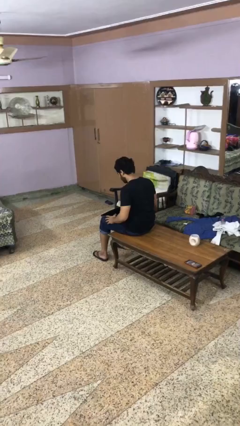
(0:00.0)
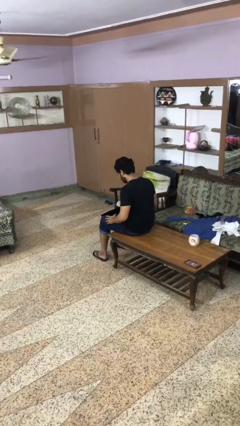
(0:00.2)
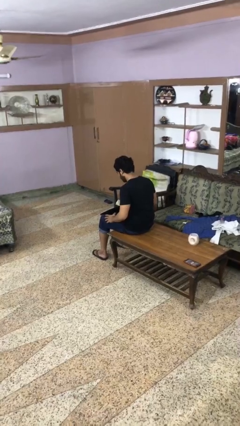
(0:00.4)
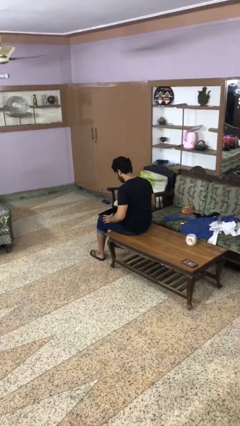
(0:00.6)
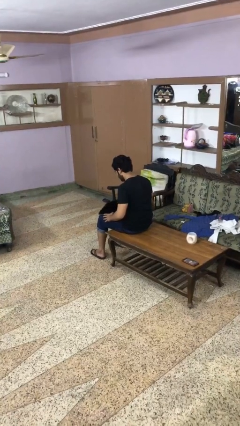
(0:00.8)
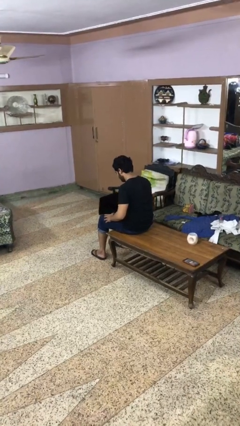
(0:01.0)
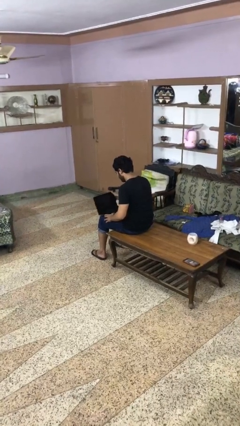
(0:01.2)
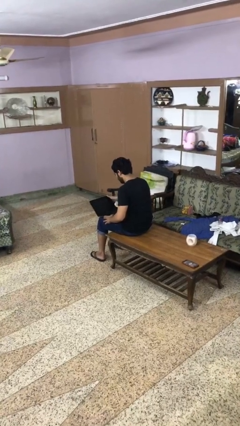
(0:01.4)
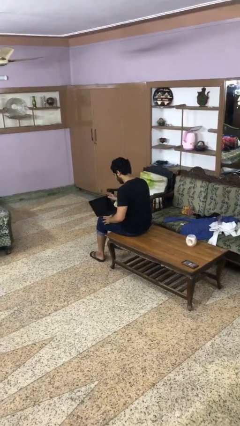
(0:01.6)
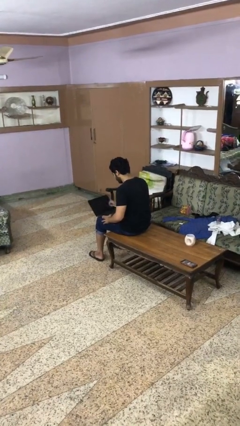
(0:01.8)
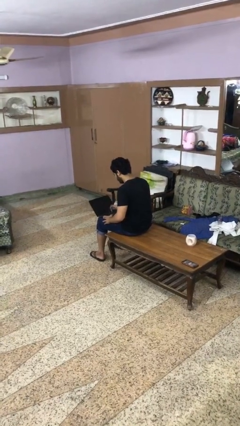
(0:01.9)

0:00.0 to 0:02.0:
person opens laptop

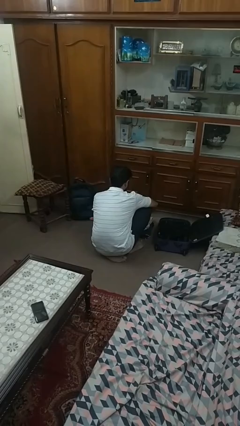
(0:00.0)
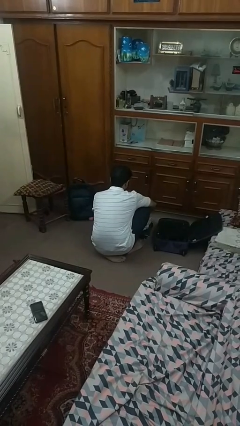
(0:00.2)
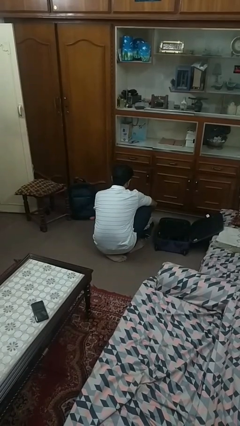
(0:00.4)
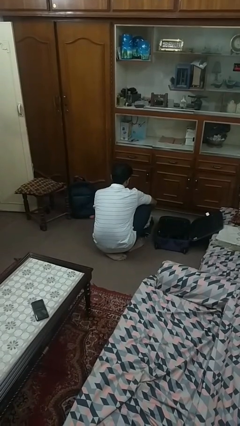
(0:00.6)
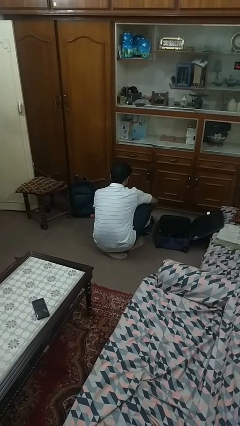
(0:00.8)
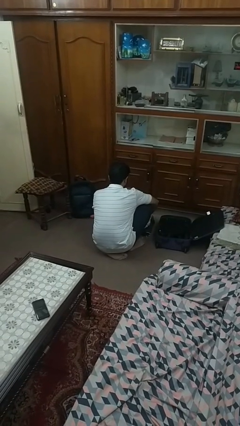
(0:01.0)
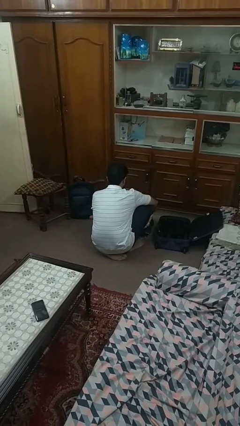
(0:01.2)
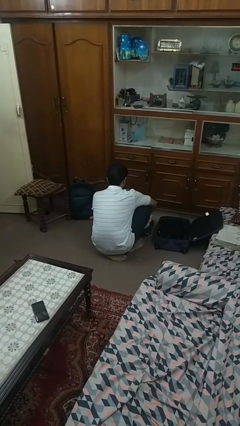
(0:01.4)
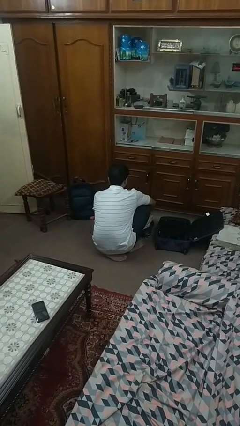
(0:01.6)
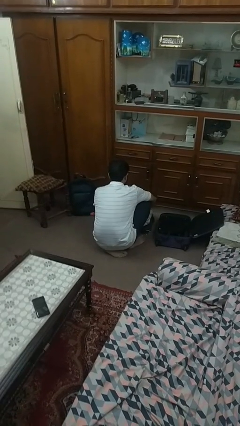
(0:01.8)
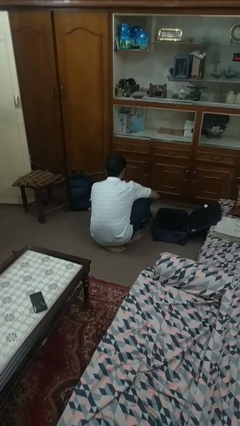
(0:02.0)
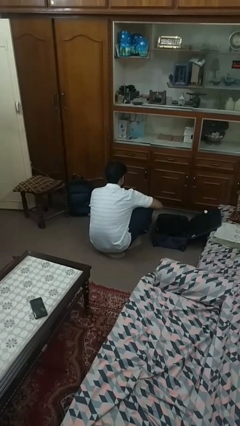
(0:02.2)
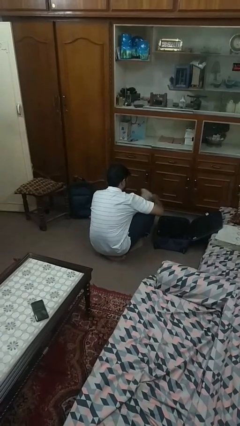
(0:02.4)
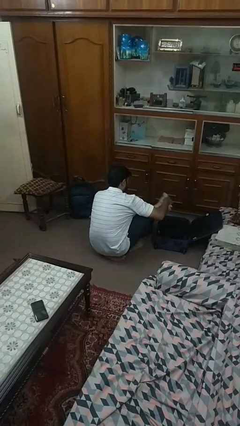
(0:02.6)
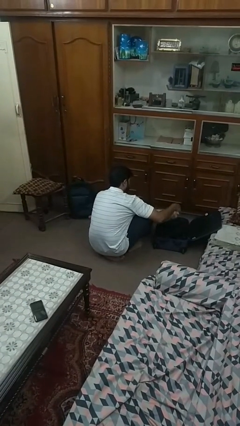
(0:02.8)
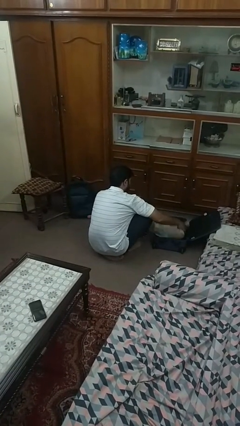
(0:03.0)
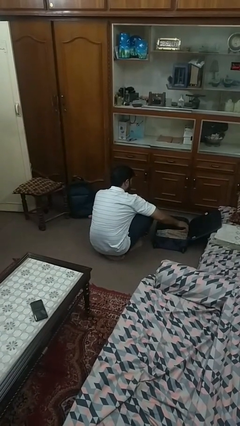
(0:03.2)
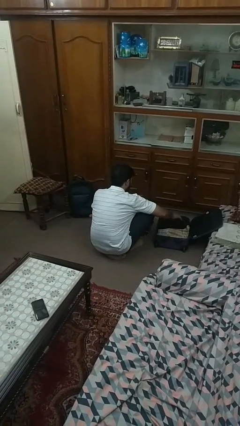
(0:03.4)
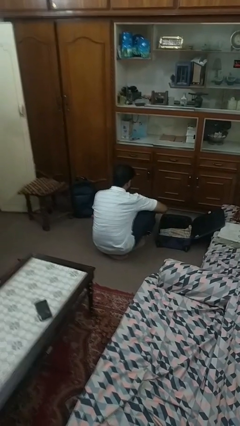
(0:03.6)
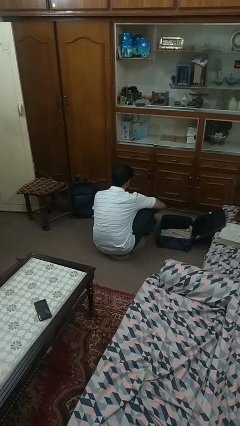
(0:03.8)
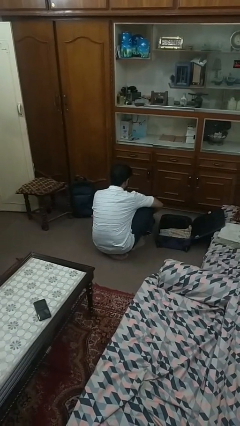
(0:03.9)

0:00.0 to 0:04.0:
person loads clothes into suitcase

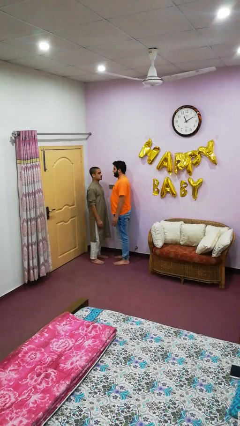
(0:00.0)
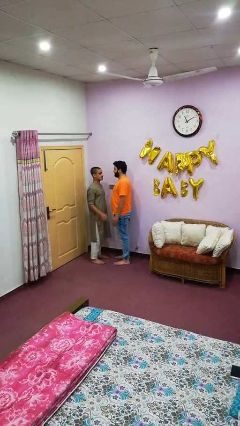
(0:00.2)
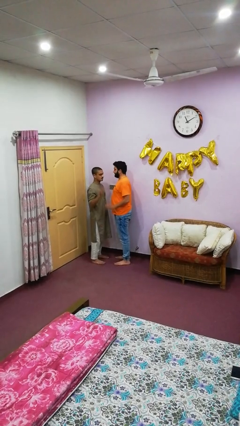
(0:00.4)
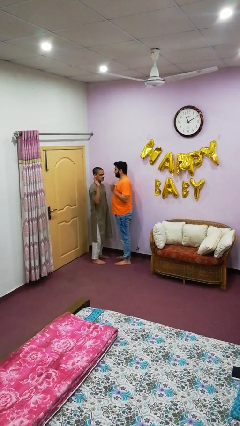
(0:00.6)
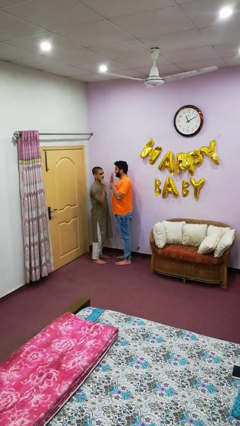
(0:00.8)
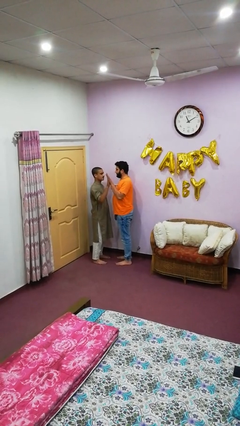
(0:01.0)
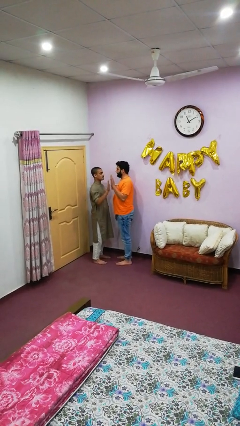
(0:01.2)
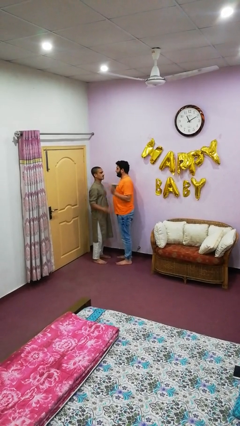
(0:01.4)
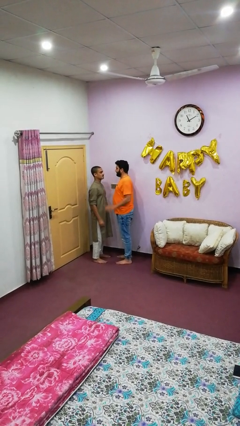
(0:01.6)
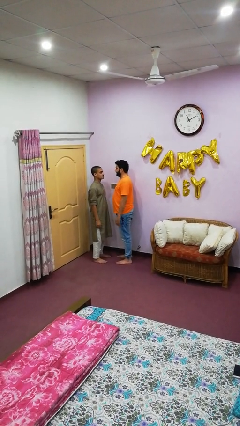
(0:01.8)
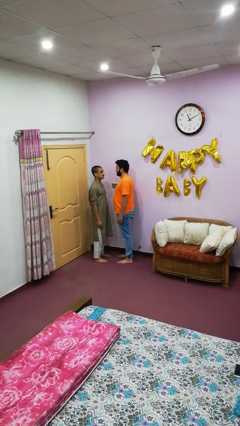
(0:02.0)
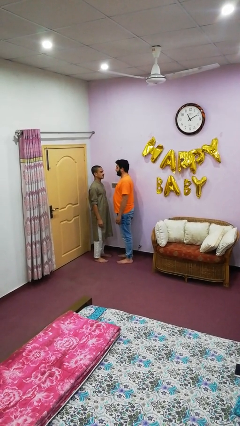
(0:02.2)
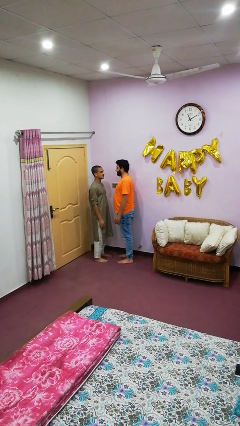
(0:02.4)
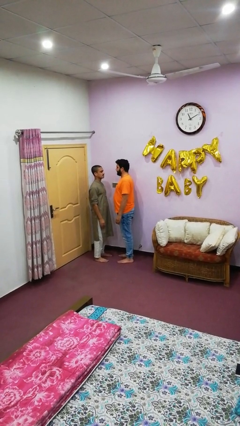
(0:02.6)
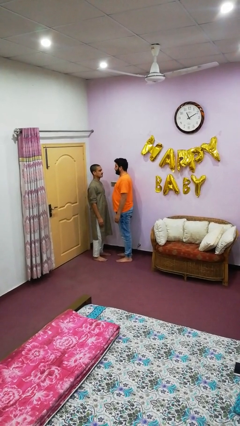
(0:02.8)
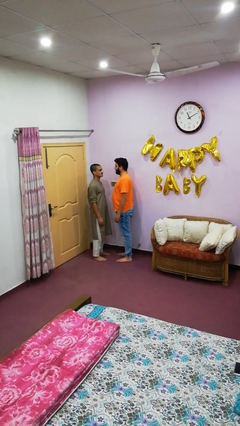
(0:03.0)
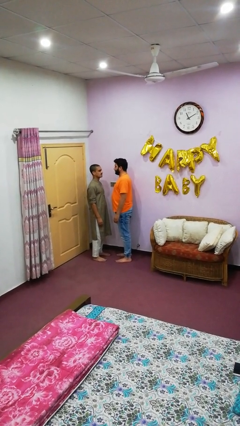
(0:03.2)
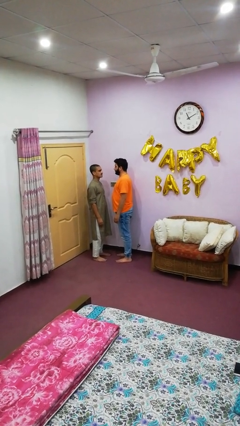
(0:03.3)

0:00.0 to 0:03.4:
person highfives hand

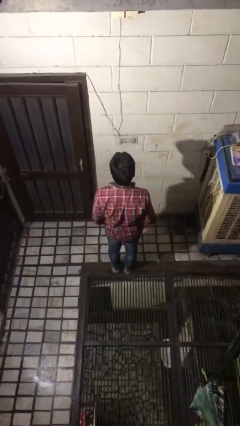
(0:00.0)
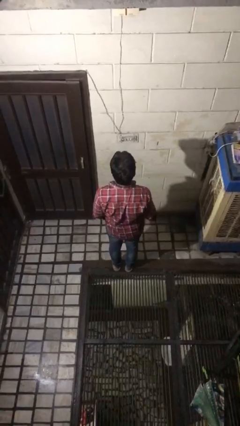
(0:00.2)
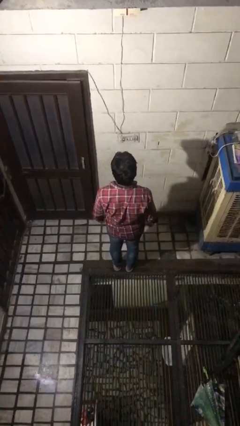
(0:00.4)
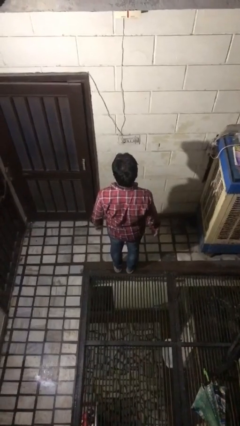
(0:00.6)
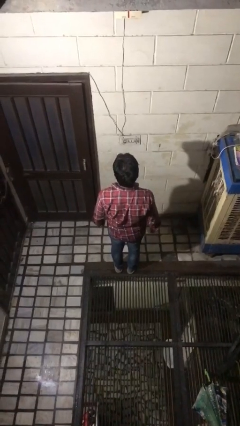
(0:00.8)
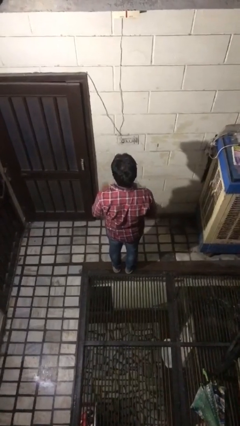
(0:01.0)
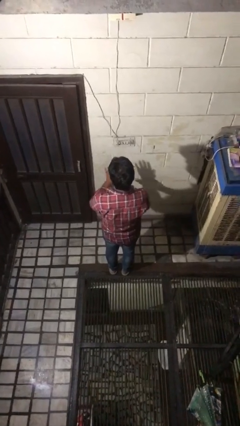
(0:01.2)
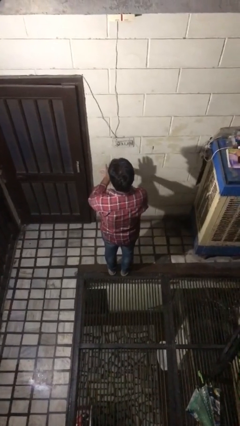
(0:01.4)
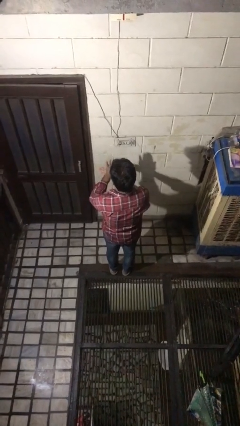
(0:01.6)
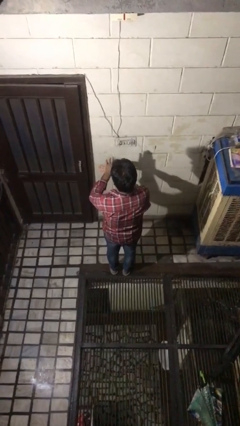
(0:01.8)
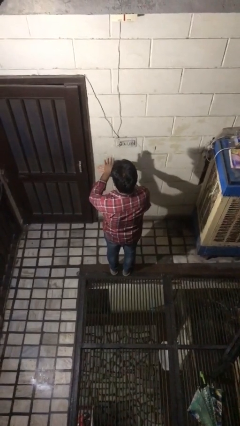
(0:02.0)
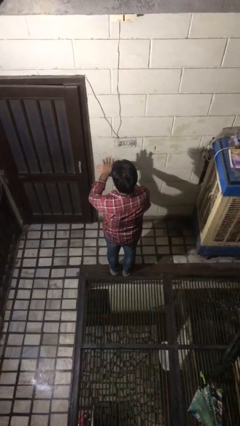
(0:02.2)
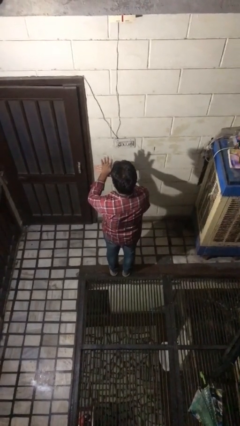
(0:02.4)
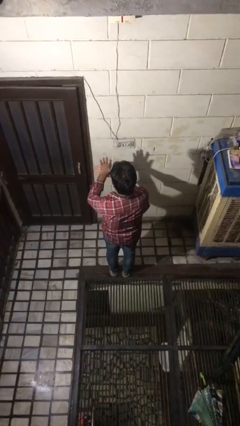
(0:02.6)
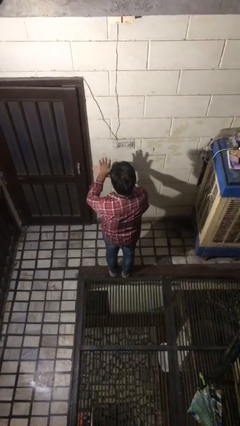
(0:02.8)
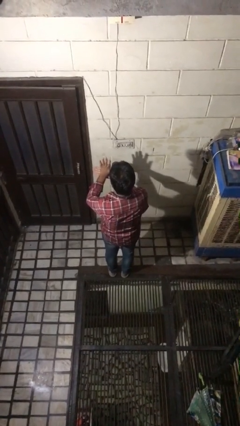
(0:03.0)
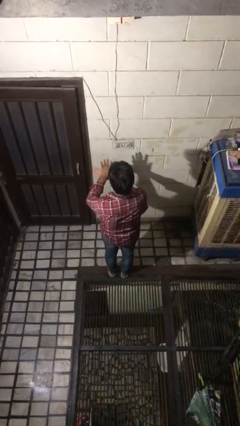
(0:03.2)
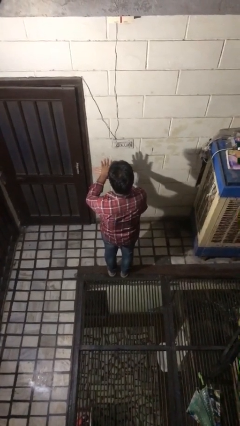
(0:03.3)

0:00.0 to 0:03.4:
person gestures number five

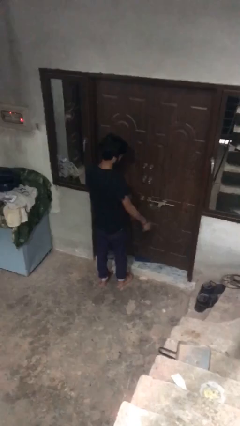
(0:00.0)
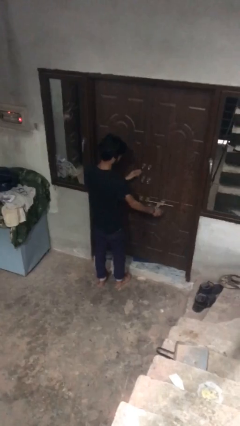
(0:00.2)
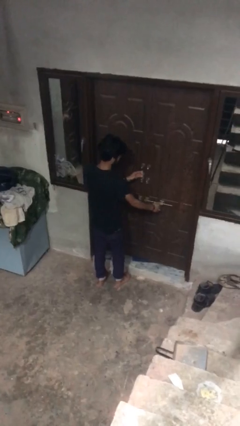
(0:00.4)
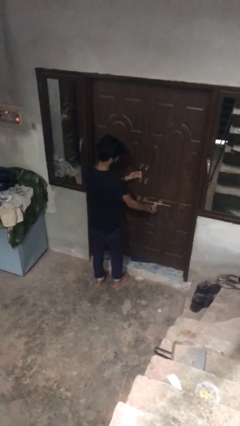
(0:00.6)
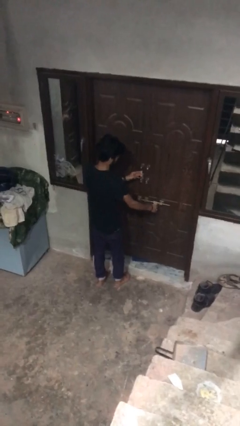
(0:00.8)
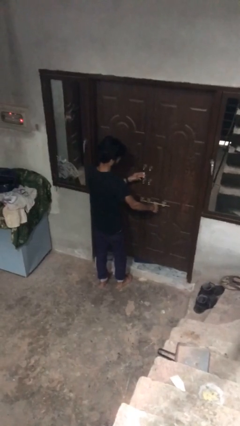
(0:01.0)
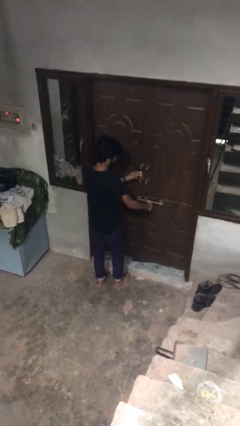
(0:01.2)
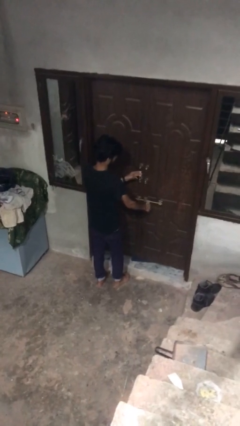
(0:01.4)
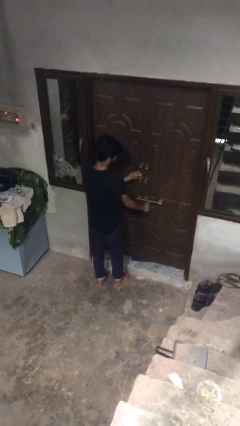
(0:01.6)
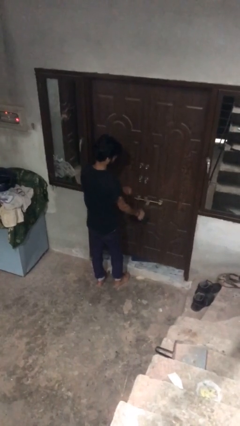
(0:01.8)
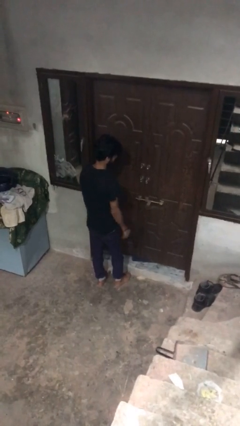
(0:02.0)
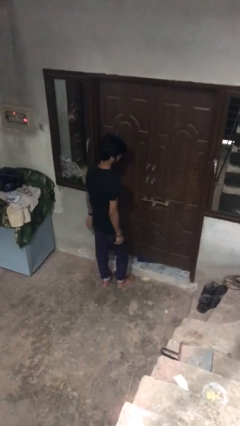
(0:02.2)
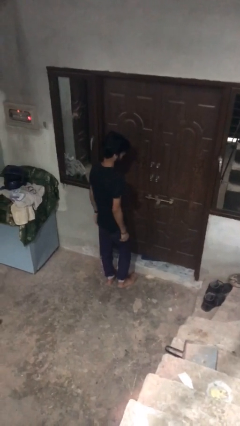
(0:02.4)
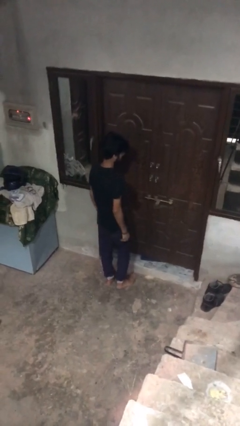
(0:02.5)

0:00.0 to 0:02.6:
person locks door with keys

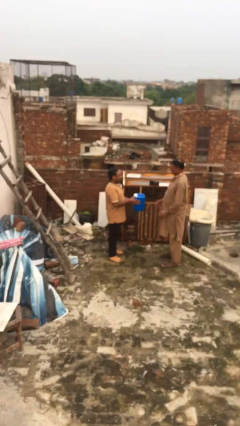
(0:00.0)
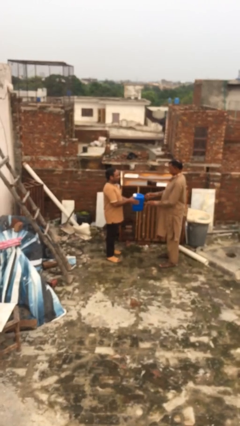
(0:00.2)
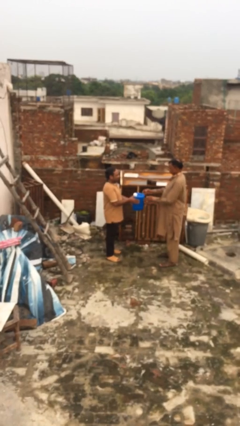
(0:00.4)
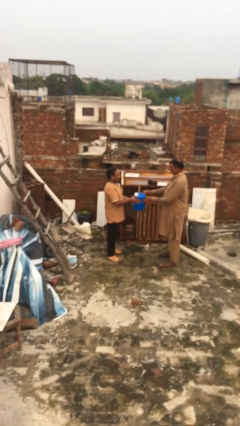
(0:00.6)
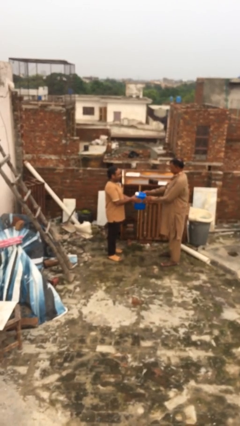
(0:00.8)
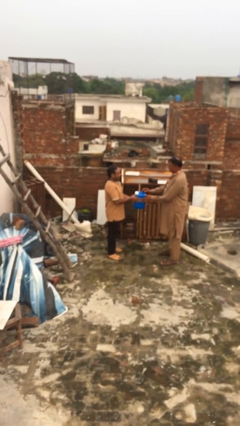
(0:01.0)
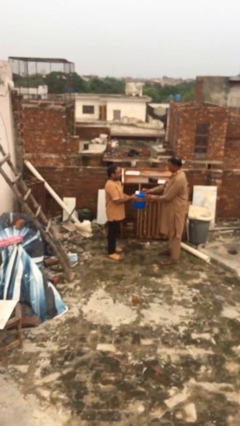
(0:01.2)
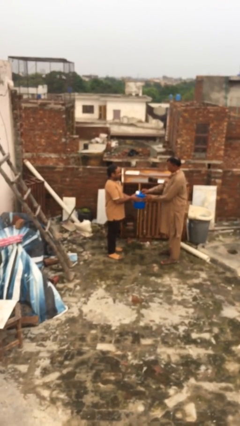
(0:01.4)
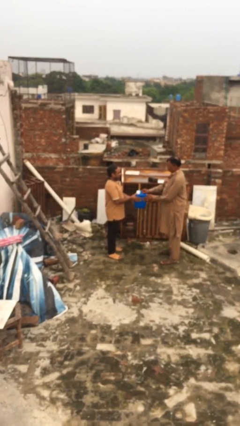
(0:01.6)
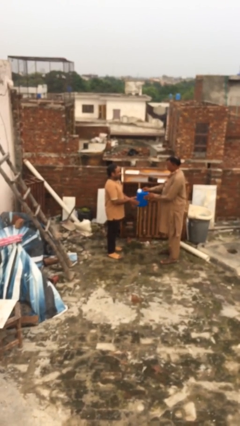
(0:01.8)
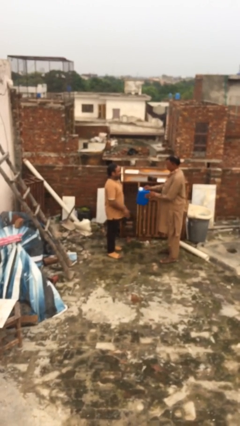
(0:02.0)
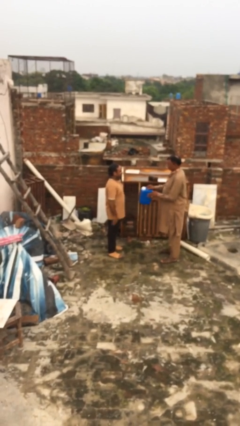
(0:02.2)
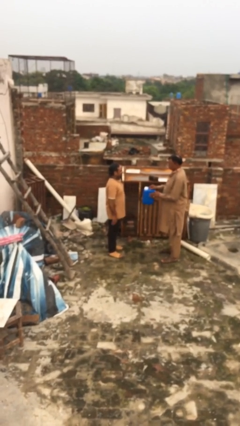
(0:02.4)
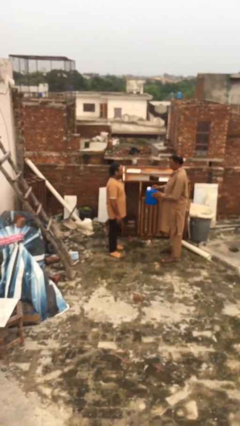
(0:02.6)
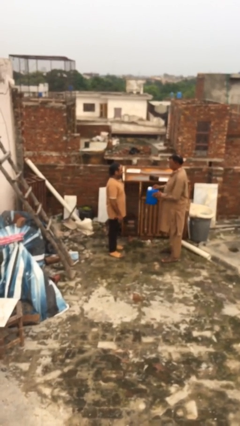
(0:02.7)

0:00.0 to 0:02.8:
person transfers object to person
